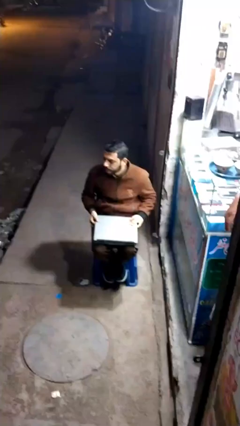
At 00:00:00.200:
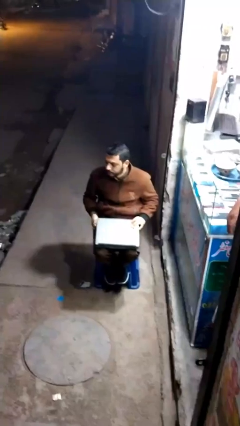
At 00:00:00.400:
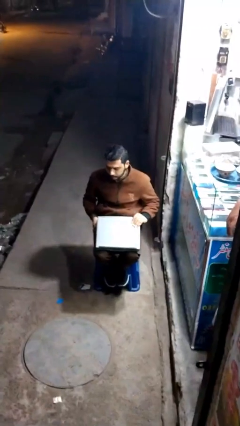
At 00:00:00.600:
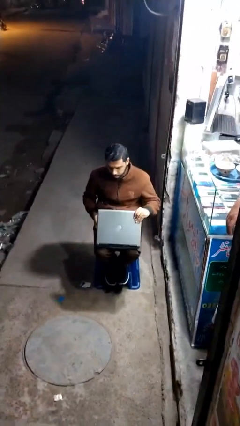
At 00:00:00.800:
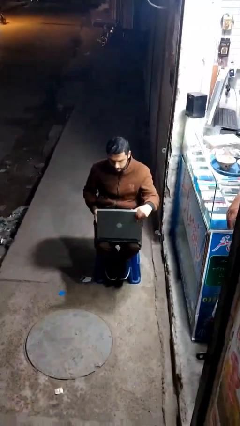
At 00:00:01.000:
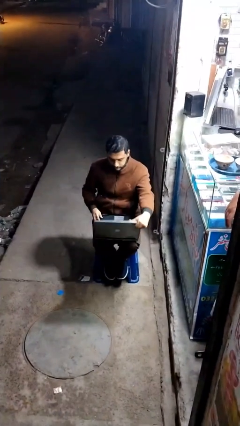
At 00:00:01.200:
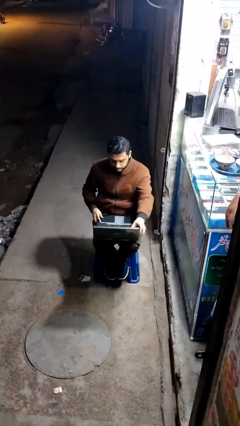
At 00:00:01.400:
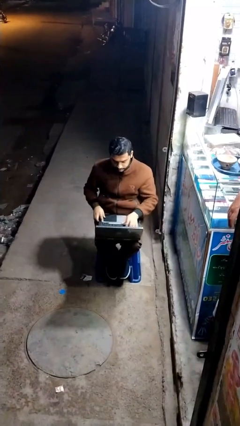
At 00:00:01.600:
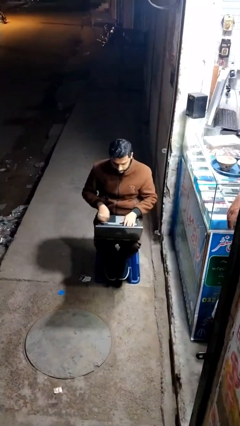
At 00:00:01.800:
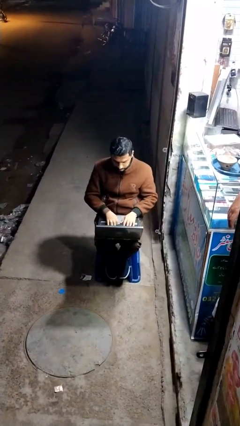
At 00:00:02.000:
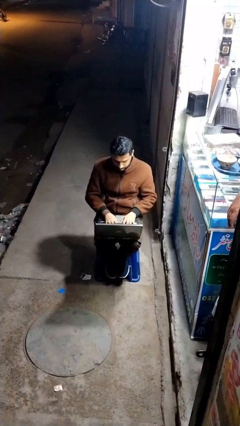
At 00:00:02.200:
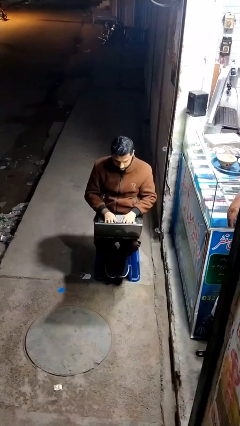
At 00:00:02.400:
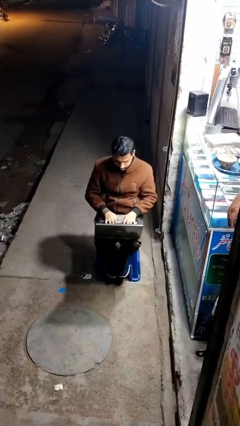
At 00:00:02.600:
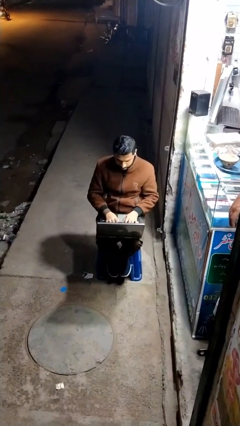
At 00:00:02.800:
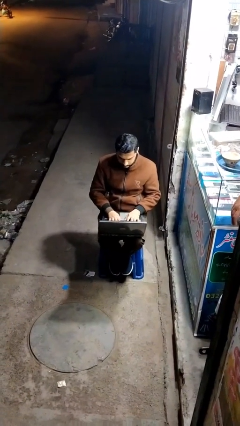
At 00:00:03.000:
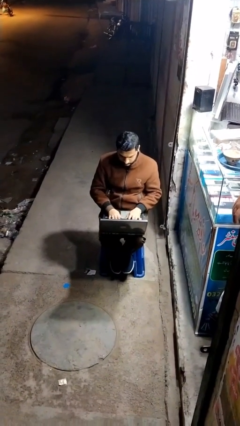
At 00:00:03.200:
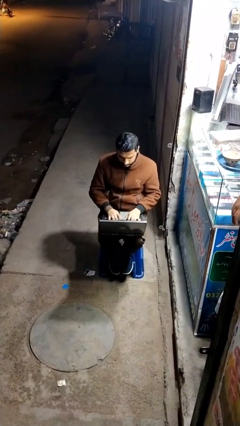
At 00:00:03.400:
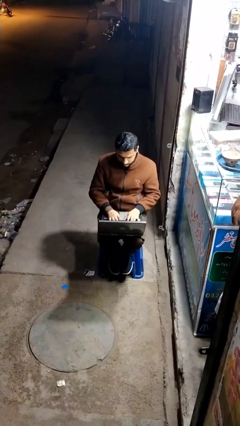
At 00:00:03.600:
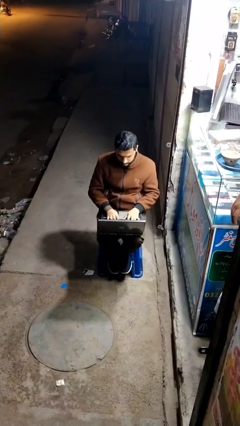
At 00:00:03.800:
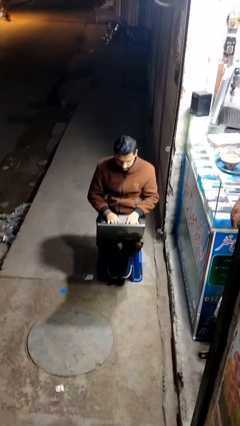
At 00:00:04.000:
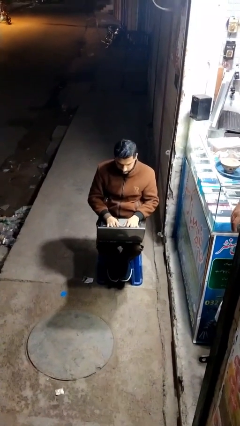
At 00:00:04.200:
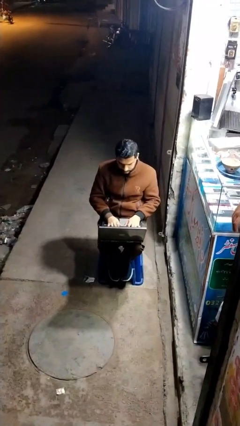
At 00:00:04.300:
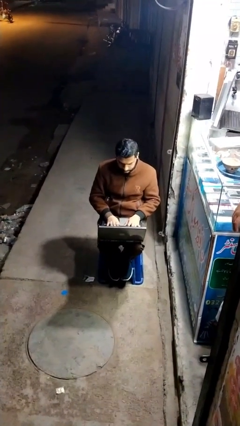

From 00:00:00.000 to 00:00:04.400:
person interacts with laptop

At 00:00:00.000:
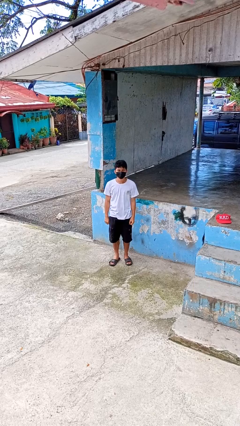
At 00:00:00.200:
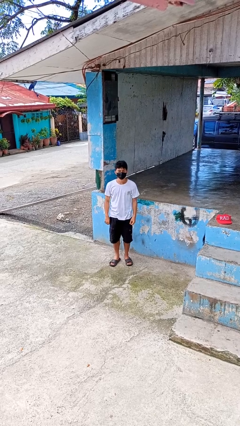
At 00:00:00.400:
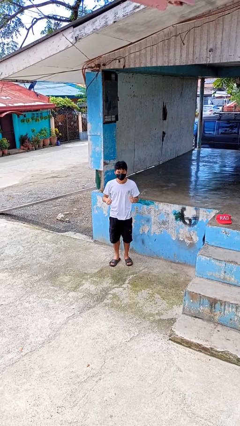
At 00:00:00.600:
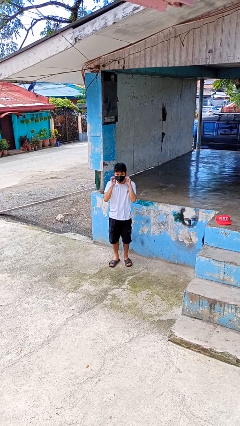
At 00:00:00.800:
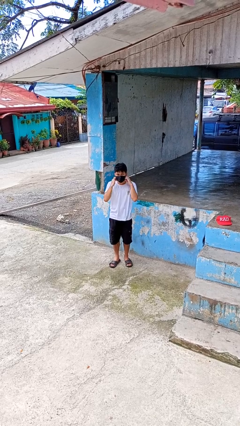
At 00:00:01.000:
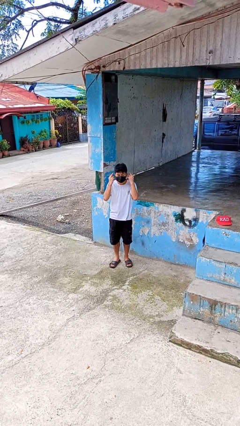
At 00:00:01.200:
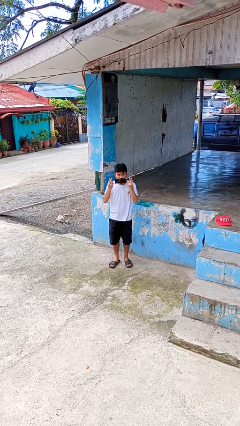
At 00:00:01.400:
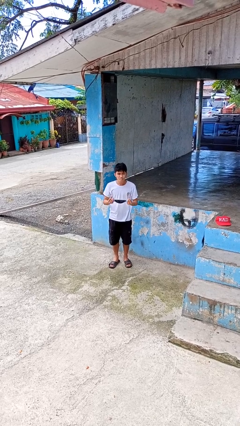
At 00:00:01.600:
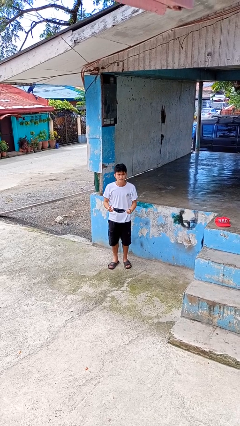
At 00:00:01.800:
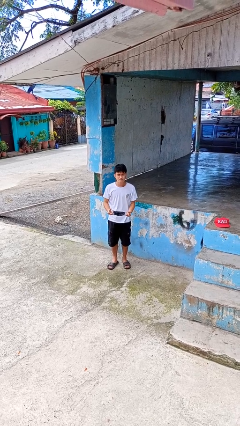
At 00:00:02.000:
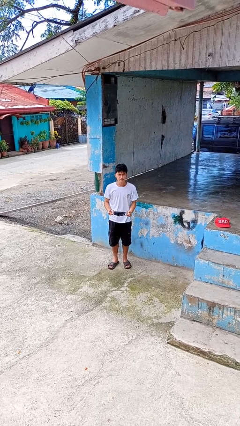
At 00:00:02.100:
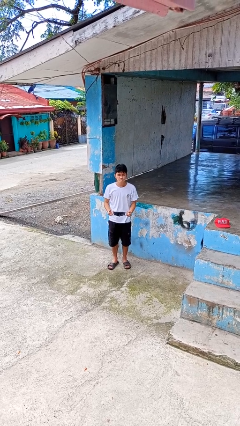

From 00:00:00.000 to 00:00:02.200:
person takes off facemask

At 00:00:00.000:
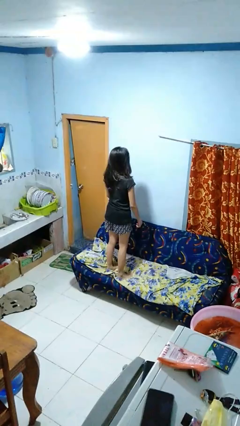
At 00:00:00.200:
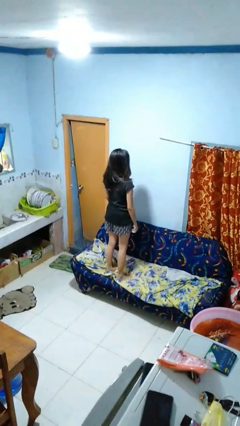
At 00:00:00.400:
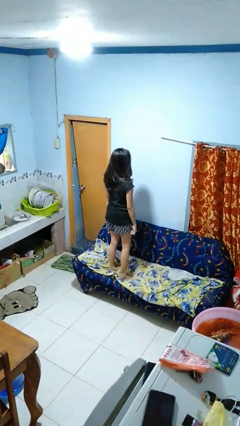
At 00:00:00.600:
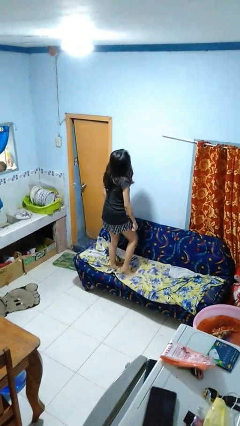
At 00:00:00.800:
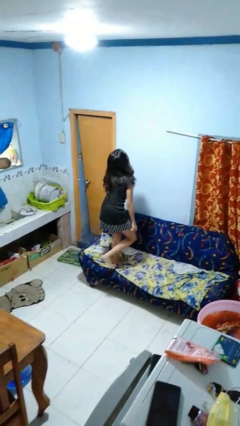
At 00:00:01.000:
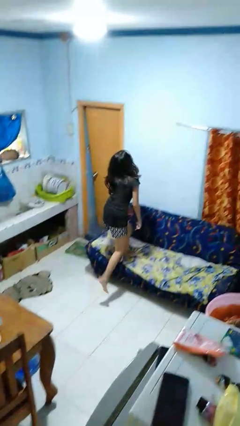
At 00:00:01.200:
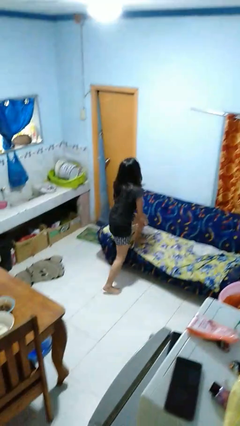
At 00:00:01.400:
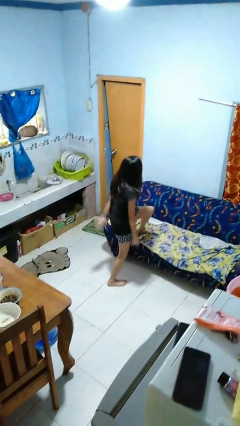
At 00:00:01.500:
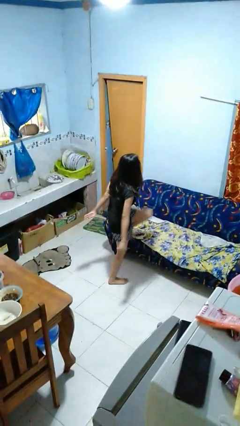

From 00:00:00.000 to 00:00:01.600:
person climbs off couch

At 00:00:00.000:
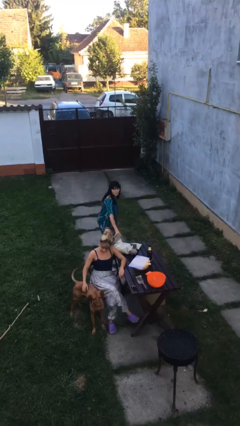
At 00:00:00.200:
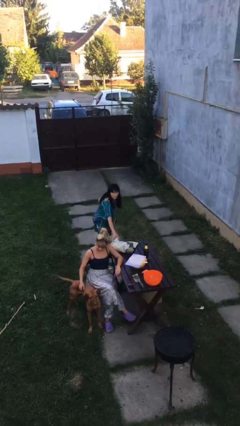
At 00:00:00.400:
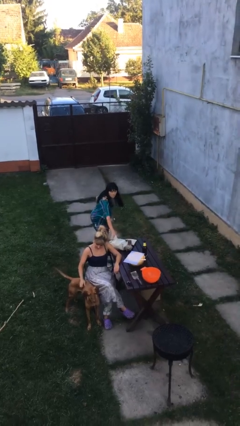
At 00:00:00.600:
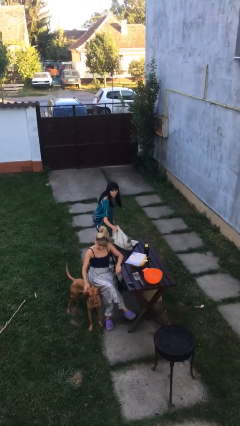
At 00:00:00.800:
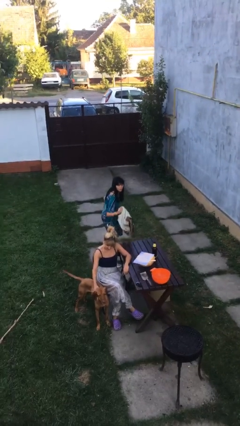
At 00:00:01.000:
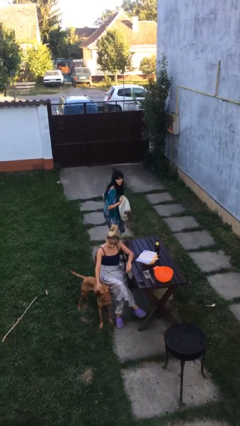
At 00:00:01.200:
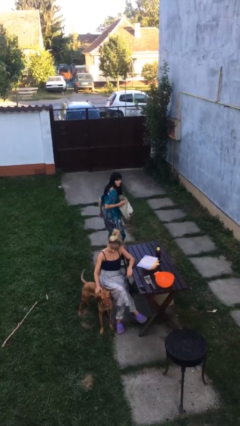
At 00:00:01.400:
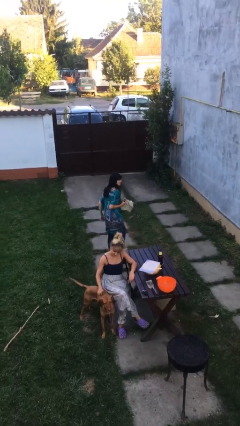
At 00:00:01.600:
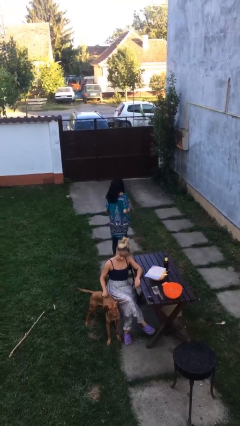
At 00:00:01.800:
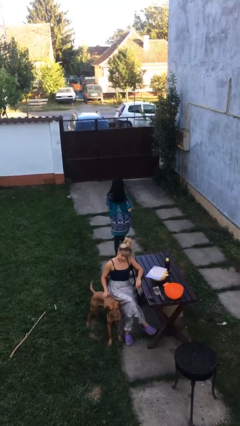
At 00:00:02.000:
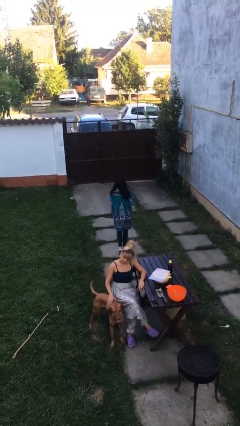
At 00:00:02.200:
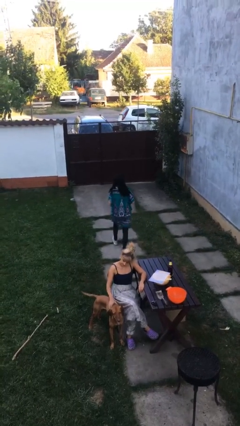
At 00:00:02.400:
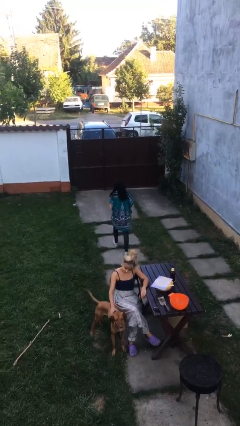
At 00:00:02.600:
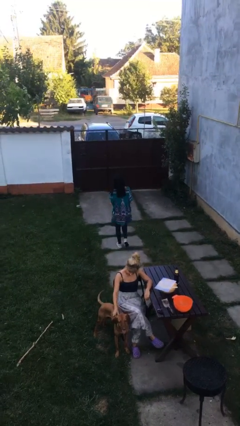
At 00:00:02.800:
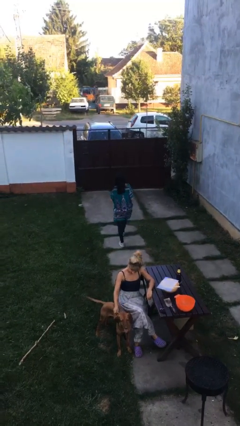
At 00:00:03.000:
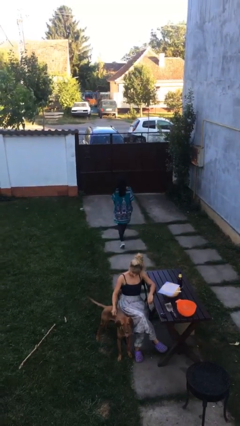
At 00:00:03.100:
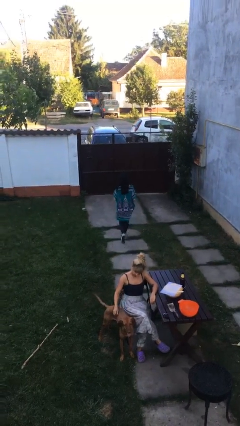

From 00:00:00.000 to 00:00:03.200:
person steals object from person

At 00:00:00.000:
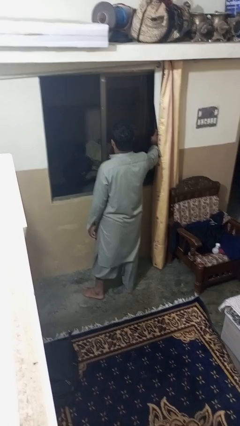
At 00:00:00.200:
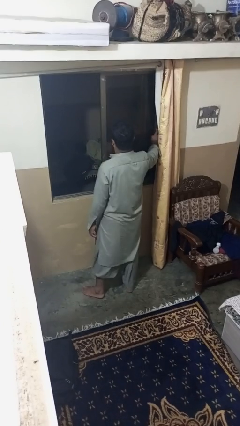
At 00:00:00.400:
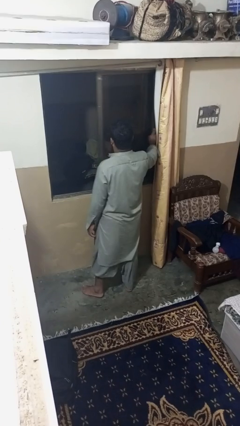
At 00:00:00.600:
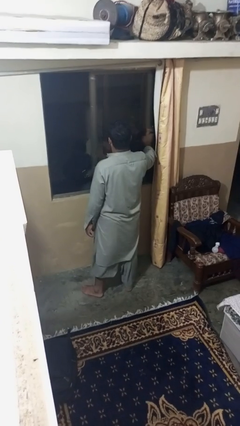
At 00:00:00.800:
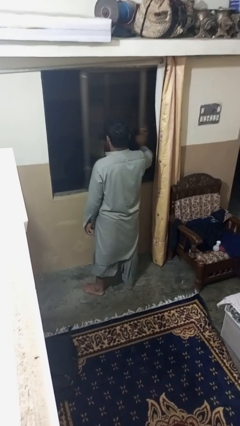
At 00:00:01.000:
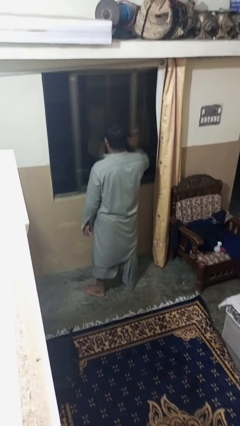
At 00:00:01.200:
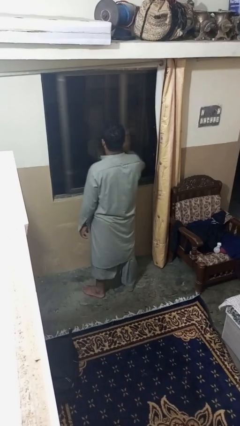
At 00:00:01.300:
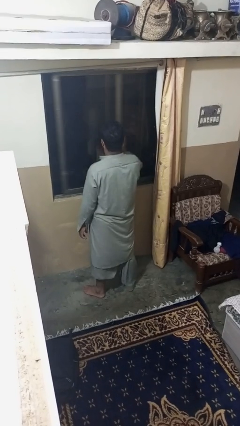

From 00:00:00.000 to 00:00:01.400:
person closes home window

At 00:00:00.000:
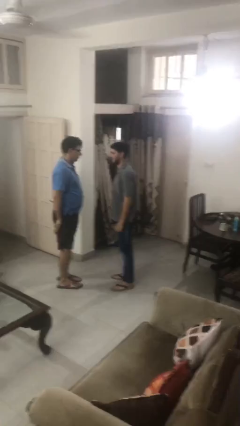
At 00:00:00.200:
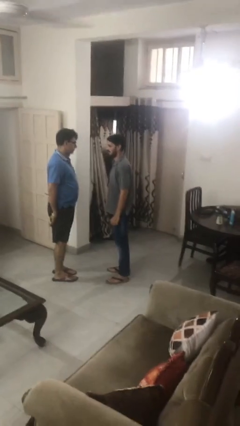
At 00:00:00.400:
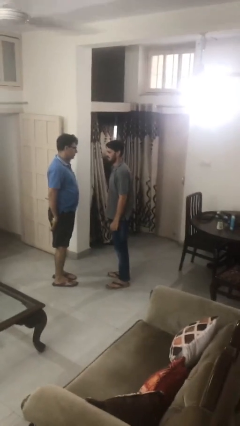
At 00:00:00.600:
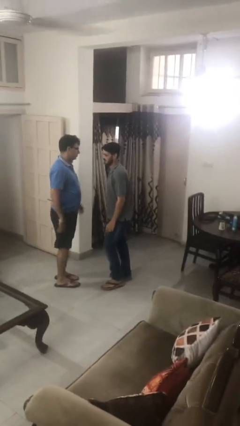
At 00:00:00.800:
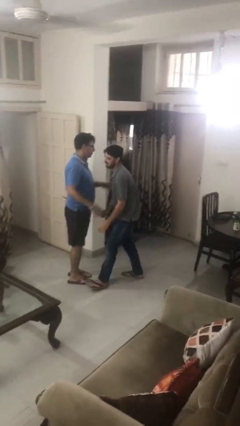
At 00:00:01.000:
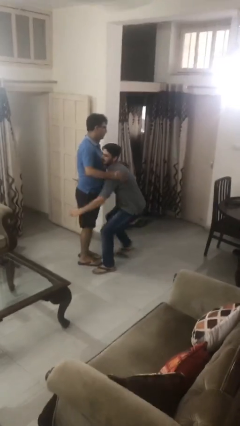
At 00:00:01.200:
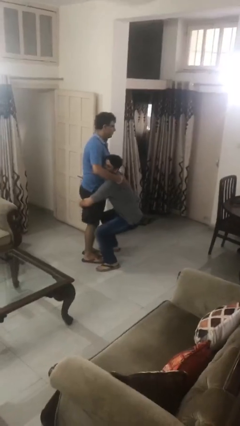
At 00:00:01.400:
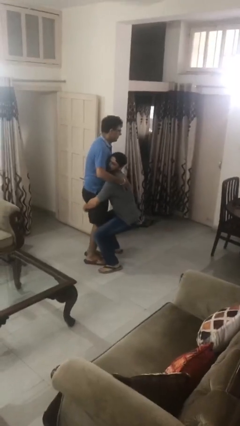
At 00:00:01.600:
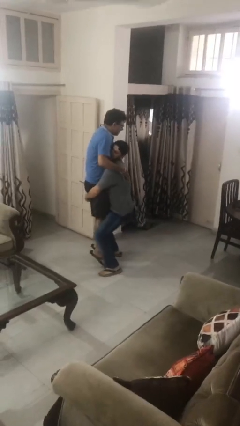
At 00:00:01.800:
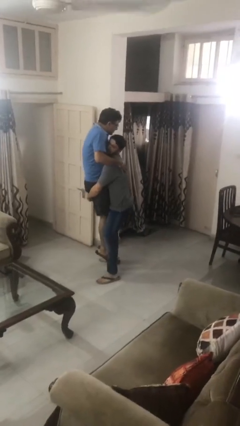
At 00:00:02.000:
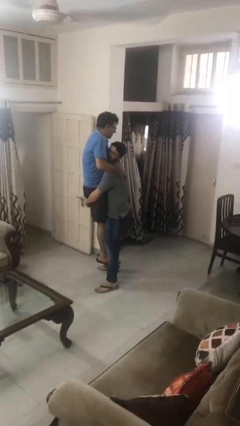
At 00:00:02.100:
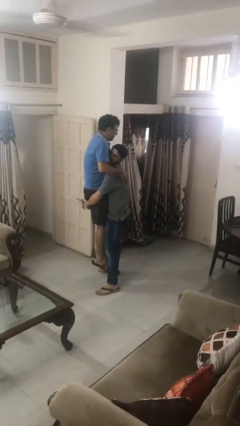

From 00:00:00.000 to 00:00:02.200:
person picks up person

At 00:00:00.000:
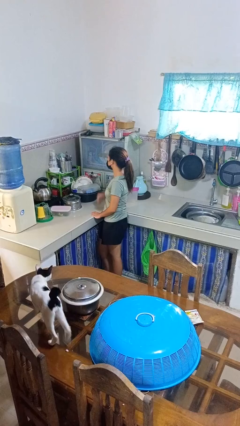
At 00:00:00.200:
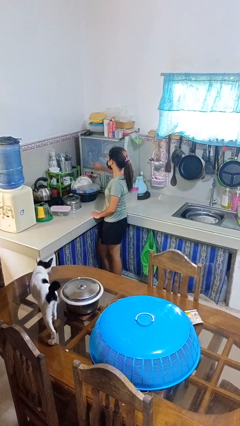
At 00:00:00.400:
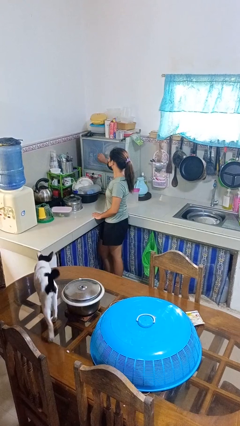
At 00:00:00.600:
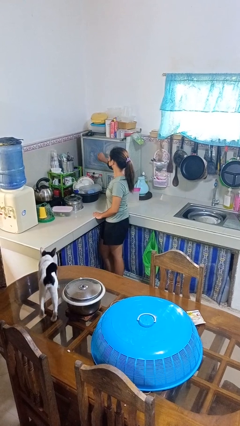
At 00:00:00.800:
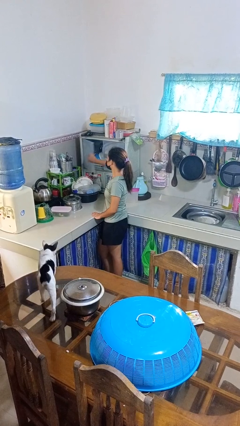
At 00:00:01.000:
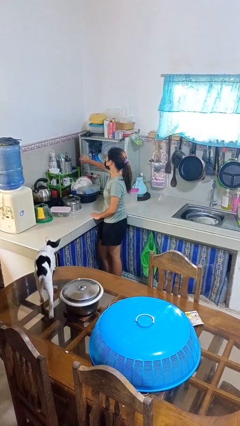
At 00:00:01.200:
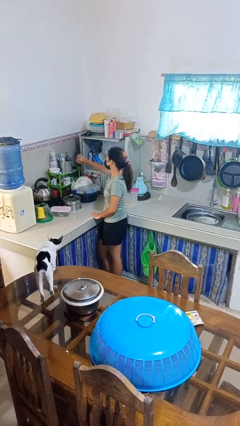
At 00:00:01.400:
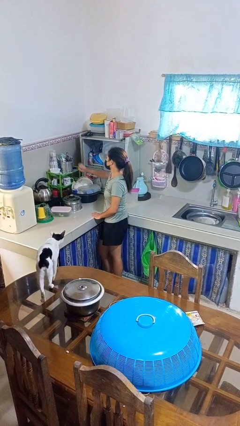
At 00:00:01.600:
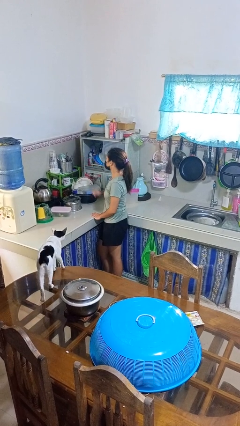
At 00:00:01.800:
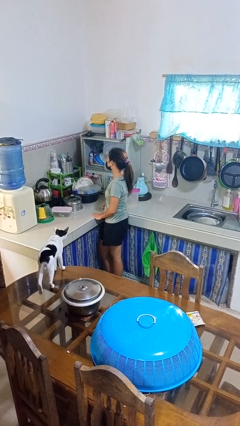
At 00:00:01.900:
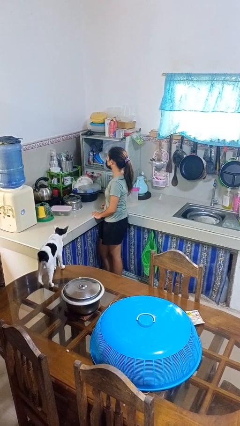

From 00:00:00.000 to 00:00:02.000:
person opens kitchen drawer
